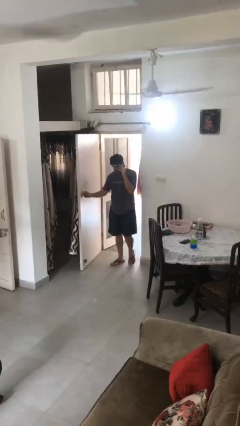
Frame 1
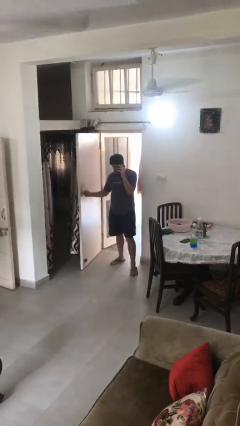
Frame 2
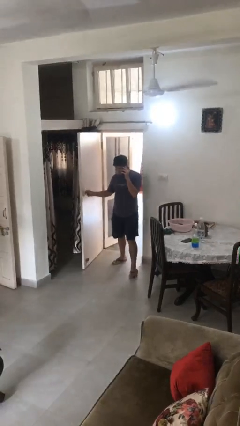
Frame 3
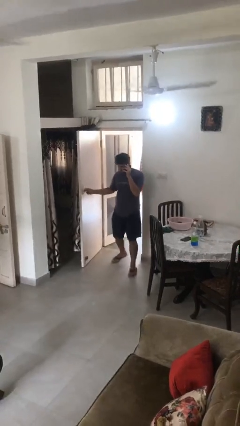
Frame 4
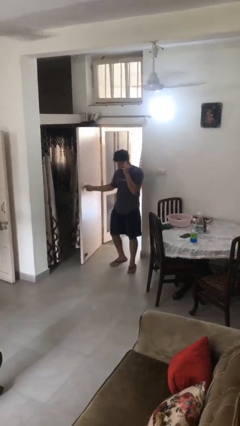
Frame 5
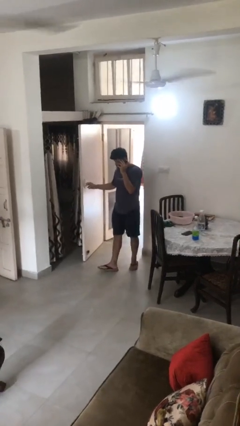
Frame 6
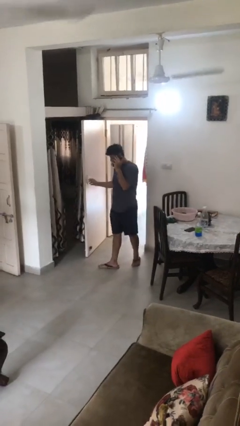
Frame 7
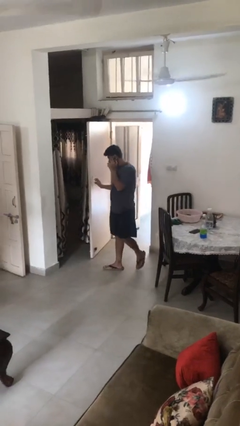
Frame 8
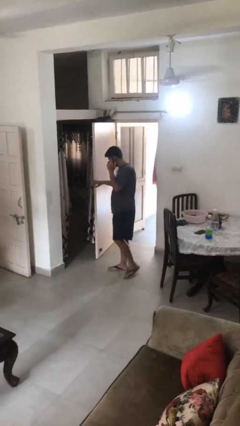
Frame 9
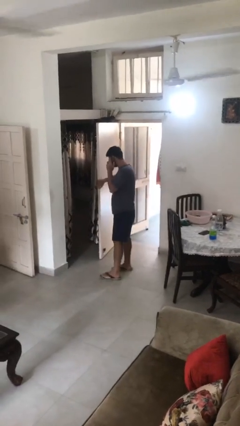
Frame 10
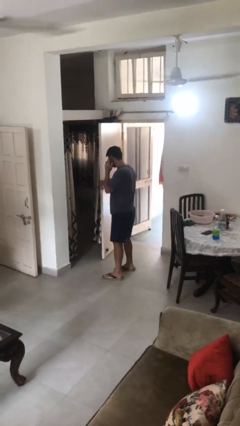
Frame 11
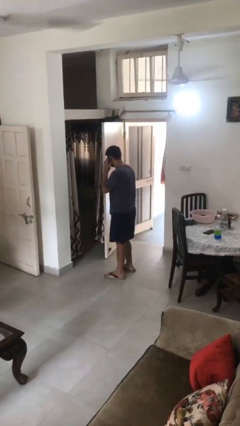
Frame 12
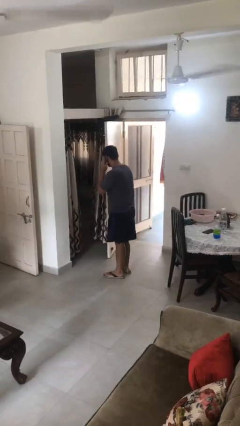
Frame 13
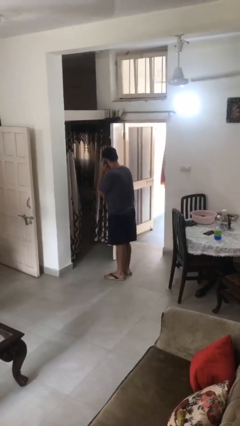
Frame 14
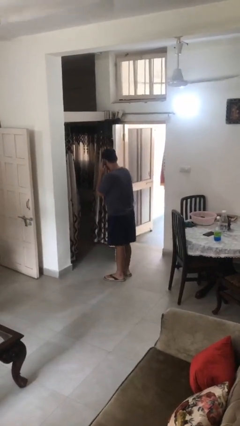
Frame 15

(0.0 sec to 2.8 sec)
person enters scene through structure

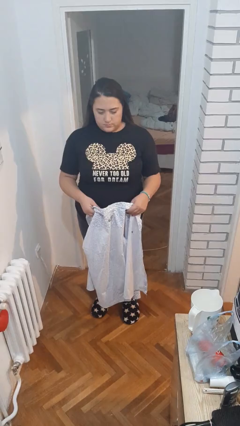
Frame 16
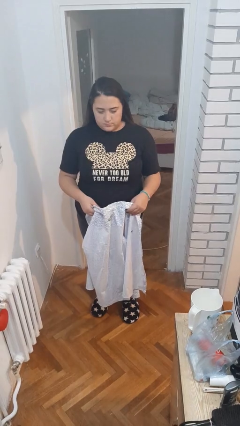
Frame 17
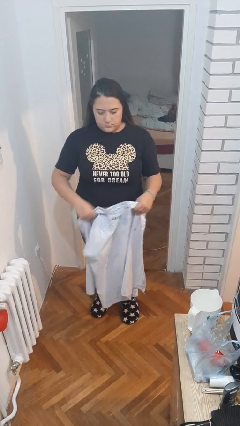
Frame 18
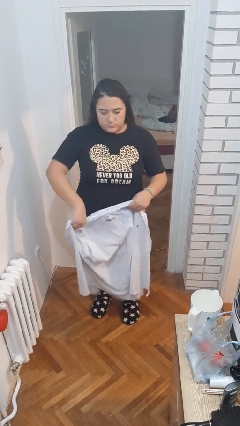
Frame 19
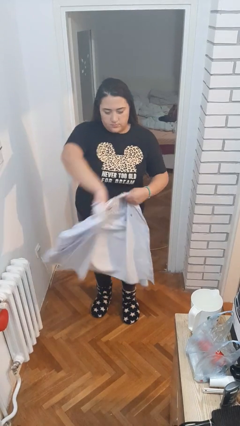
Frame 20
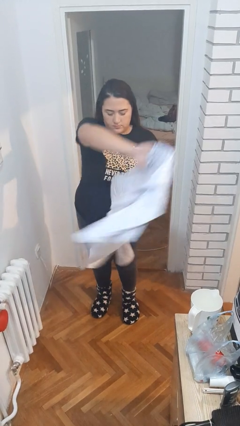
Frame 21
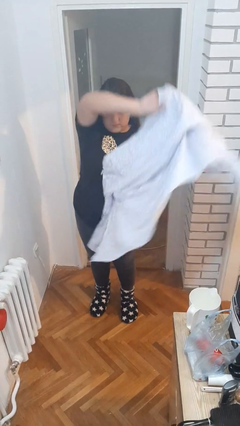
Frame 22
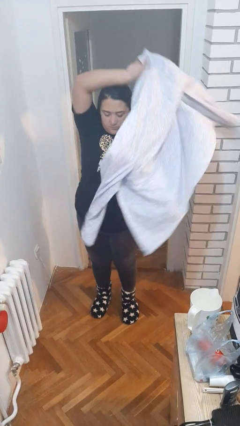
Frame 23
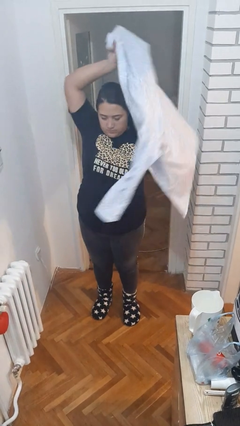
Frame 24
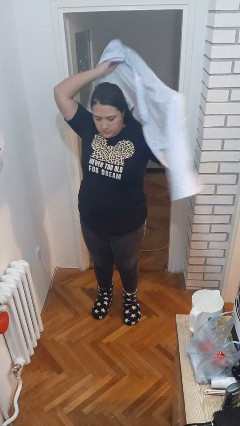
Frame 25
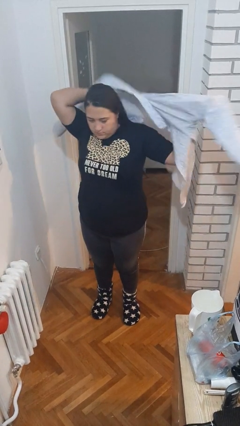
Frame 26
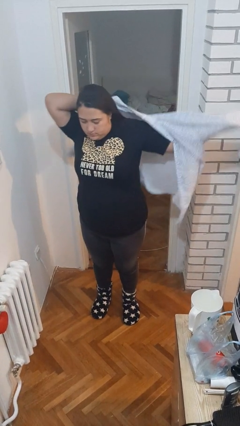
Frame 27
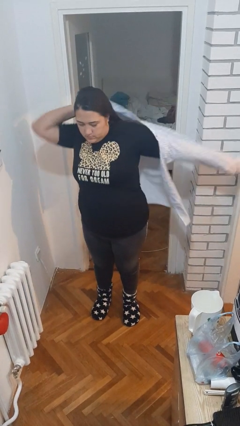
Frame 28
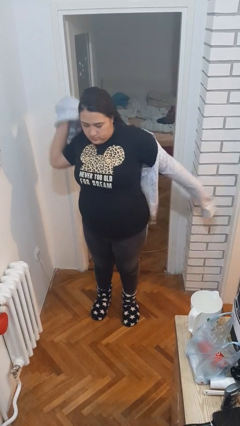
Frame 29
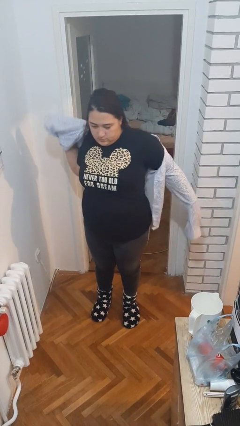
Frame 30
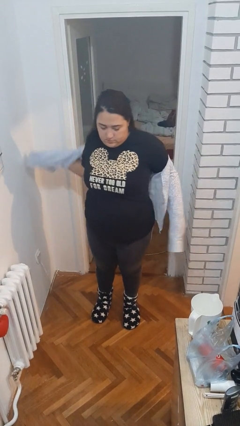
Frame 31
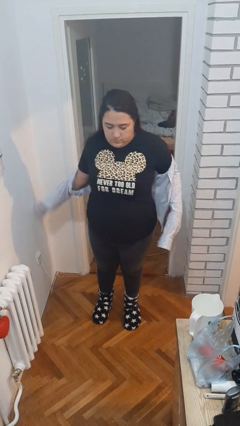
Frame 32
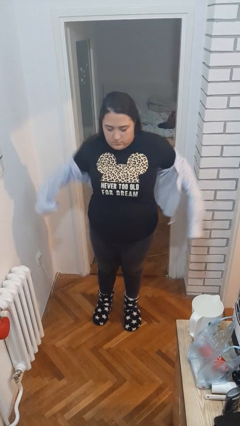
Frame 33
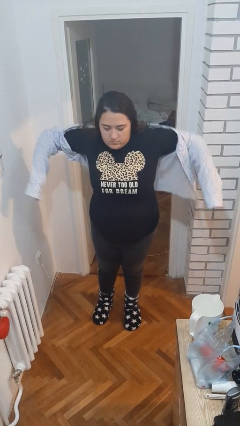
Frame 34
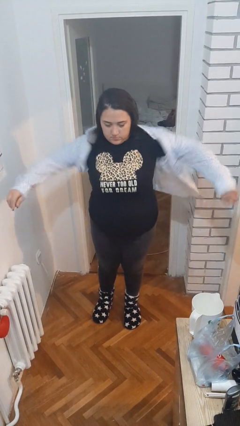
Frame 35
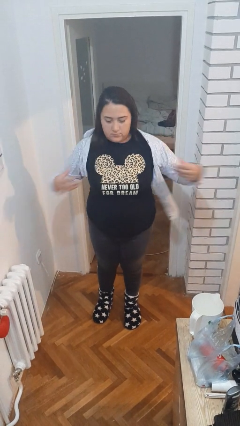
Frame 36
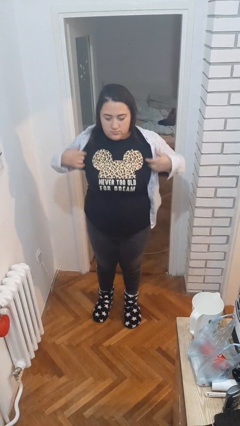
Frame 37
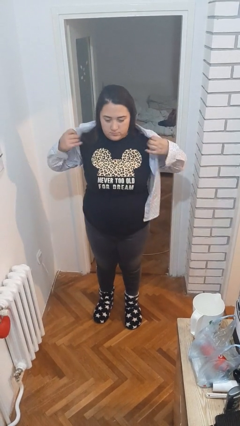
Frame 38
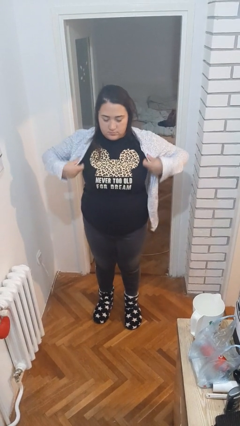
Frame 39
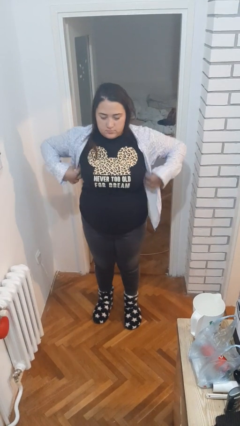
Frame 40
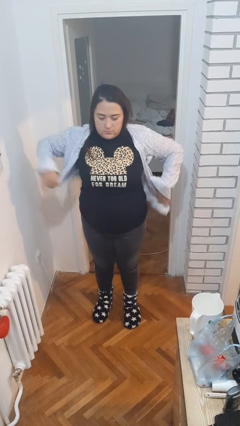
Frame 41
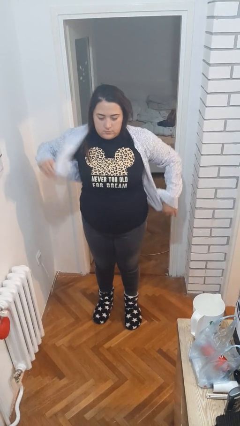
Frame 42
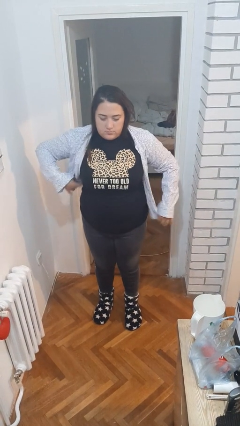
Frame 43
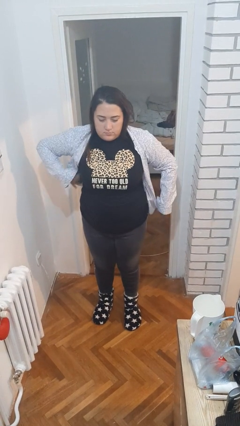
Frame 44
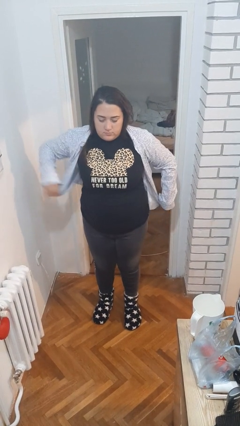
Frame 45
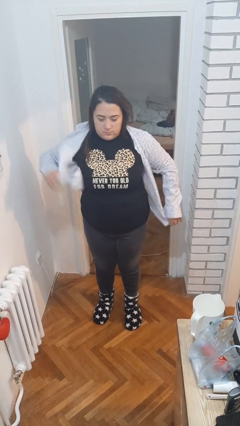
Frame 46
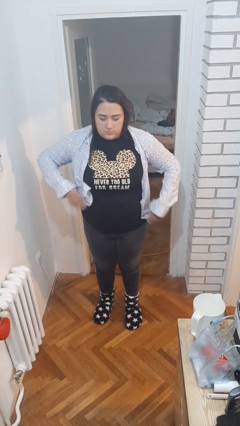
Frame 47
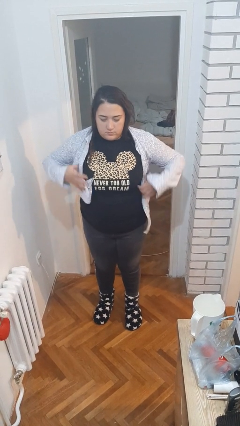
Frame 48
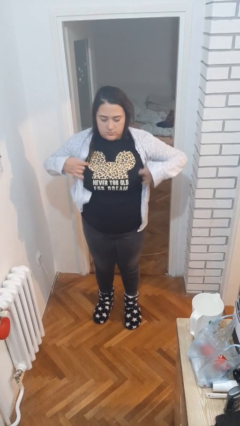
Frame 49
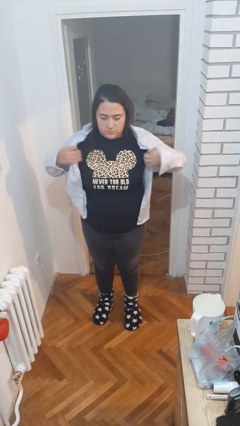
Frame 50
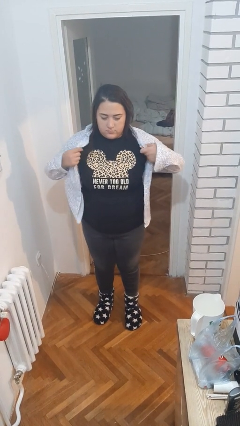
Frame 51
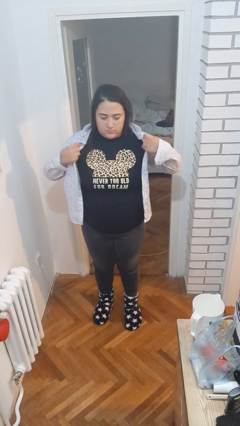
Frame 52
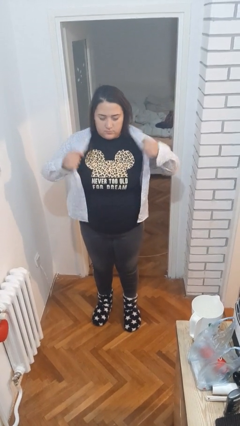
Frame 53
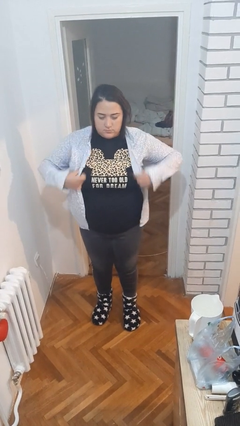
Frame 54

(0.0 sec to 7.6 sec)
person puts on shirt

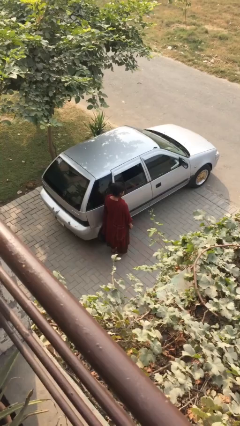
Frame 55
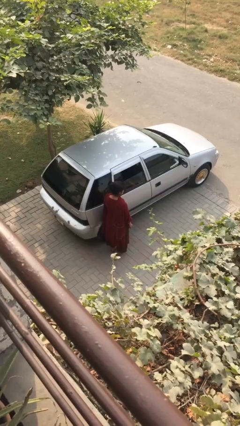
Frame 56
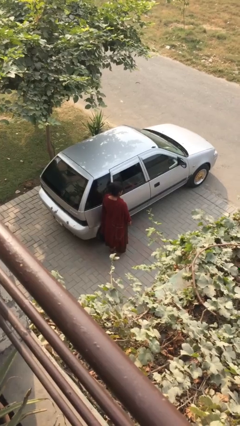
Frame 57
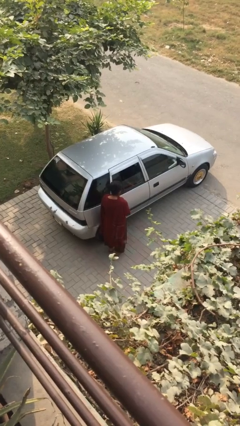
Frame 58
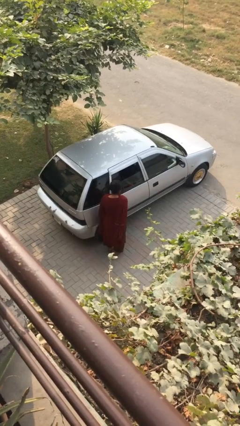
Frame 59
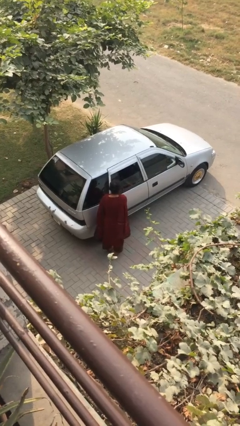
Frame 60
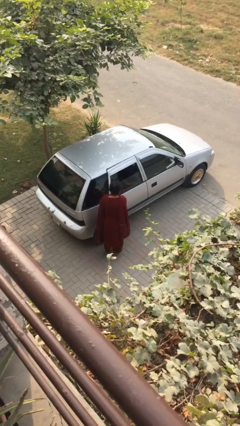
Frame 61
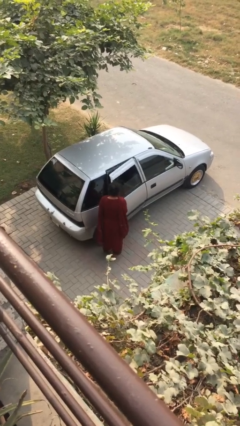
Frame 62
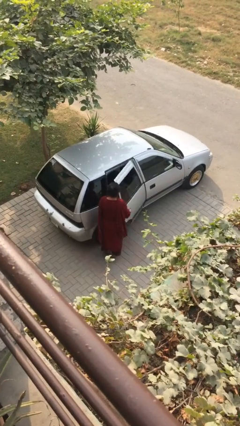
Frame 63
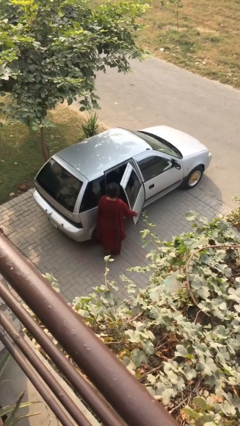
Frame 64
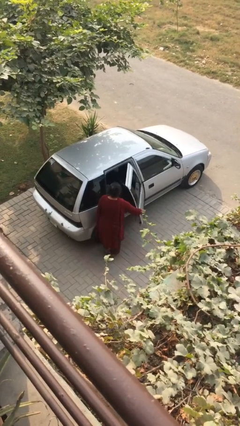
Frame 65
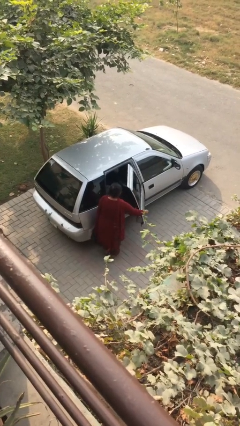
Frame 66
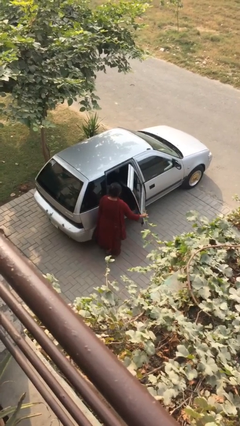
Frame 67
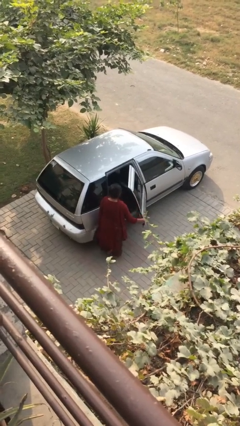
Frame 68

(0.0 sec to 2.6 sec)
person opens car door

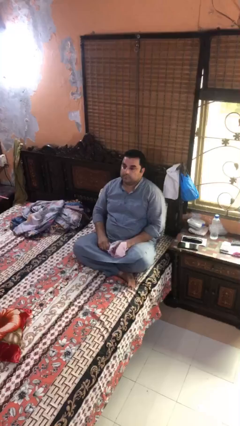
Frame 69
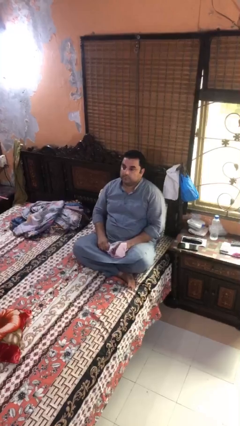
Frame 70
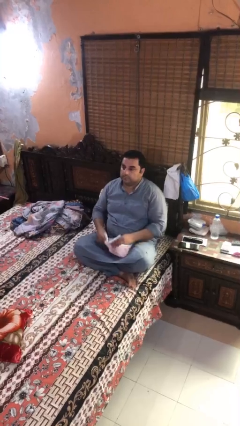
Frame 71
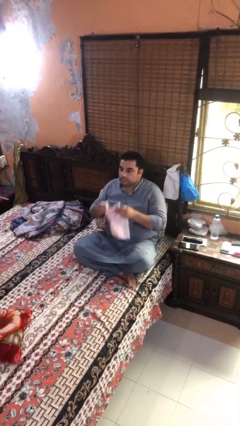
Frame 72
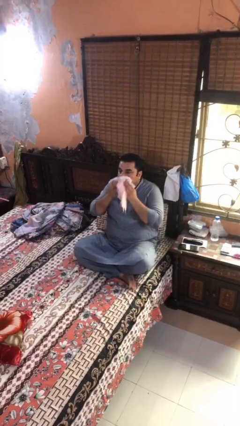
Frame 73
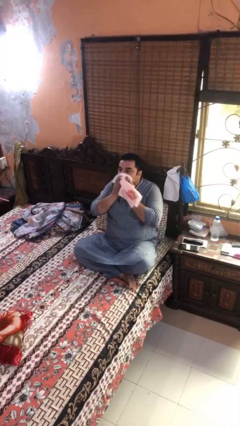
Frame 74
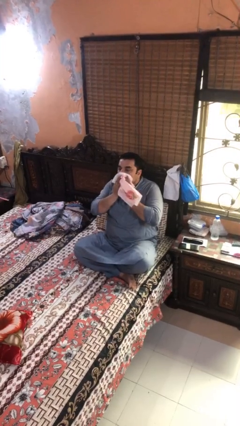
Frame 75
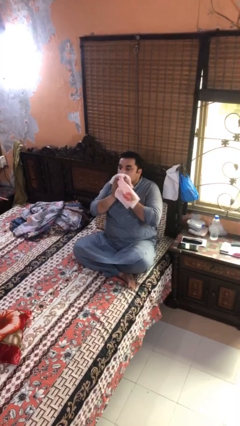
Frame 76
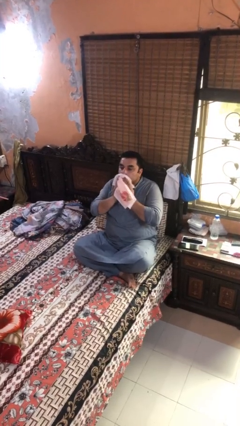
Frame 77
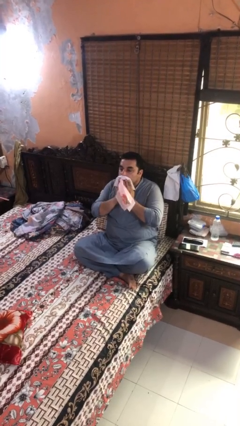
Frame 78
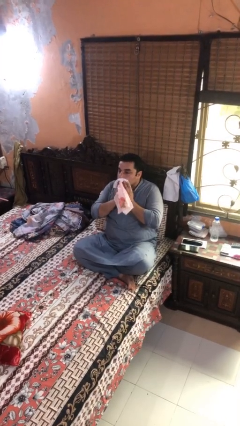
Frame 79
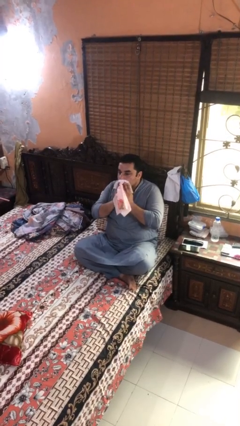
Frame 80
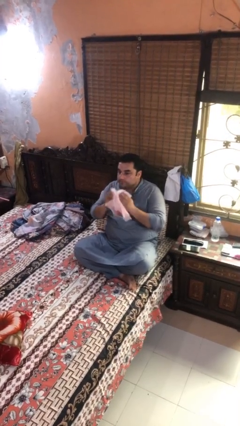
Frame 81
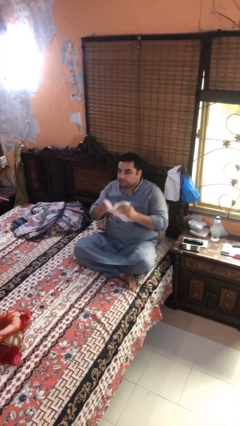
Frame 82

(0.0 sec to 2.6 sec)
person wipes mouth with napkin

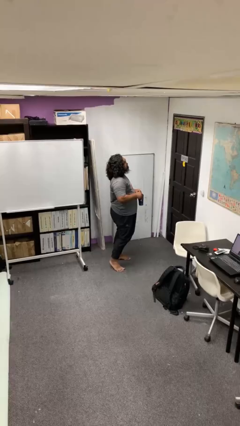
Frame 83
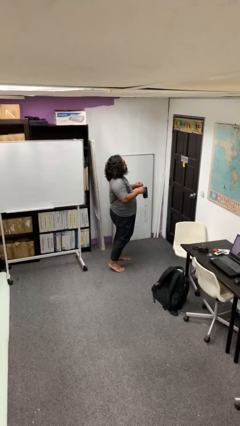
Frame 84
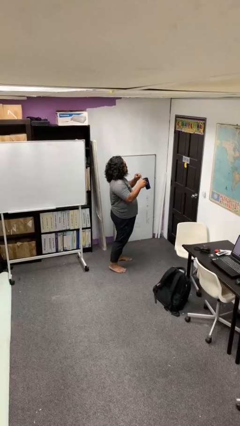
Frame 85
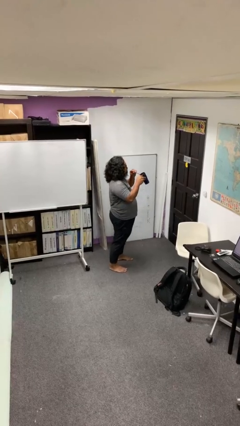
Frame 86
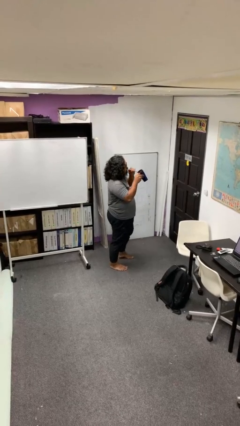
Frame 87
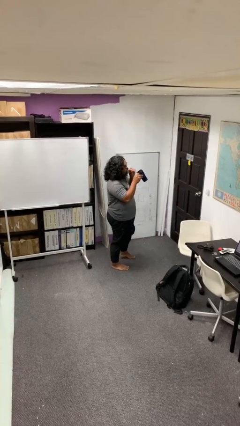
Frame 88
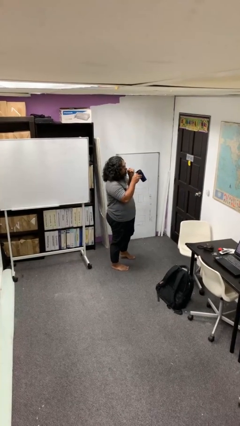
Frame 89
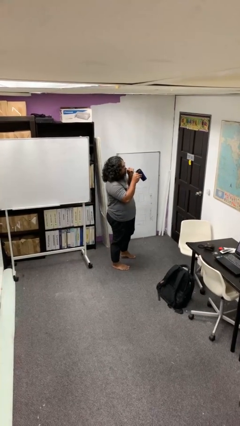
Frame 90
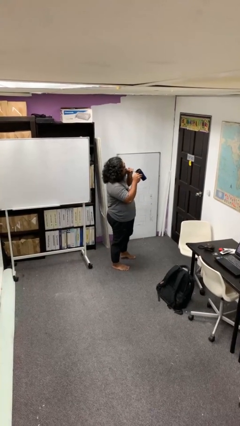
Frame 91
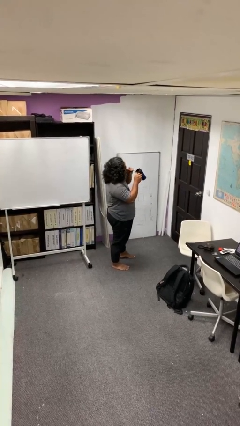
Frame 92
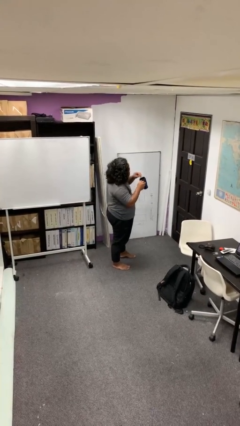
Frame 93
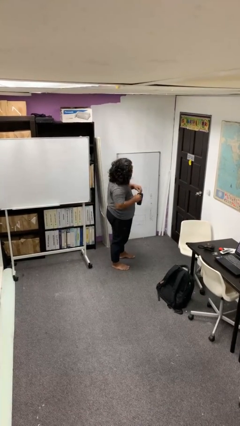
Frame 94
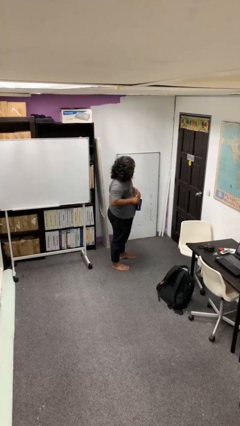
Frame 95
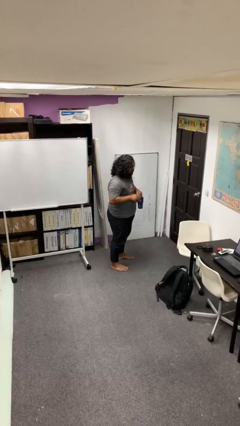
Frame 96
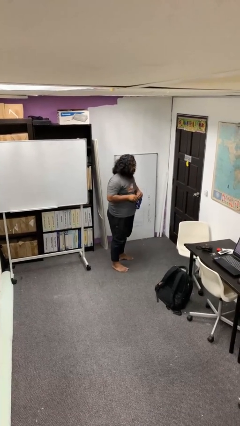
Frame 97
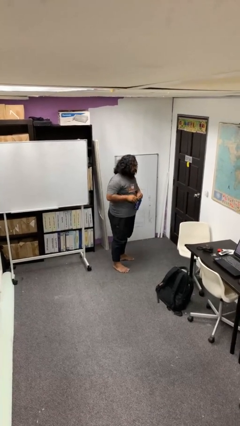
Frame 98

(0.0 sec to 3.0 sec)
person drinks from straw
